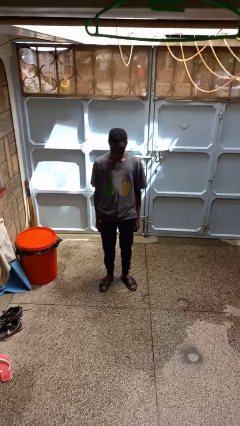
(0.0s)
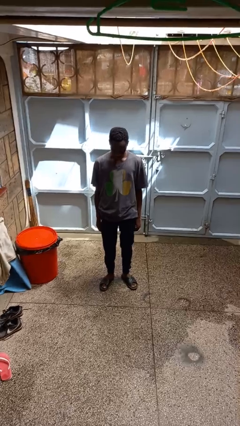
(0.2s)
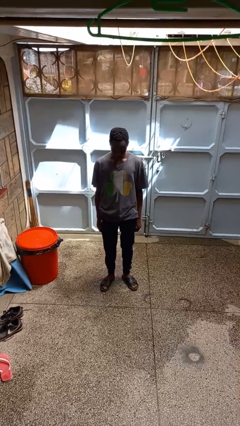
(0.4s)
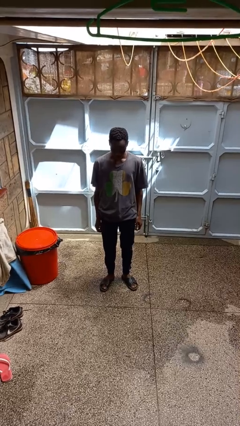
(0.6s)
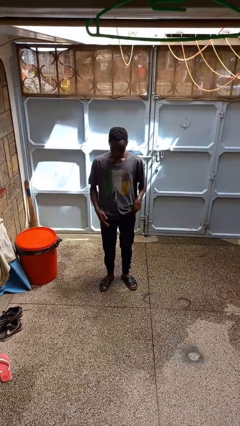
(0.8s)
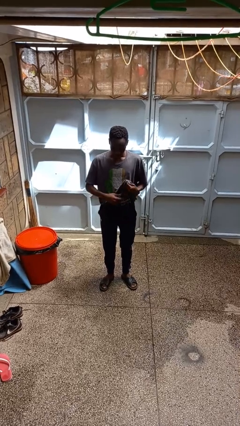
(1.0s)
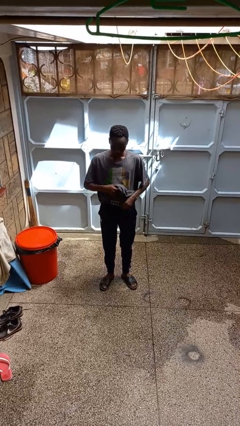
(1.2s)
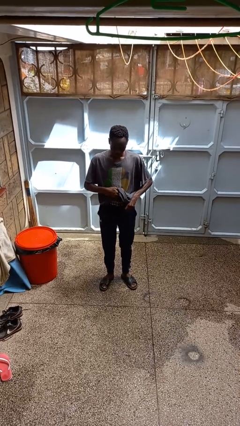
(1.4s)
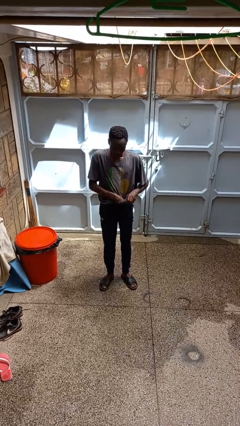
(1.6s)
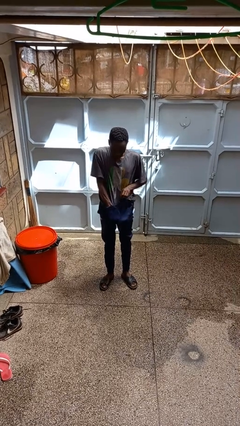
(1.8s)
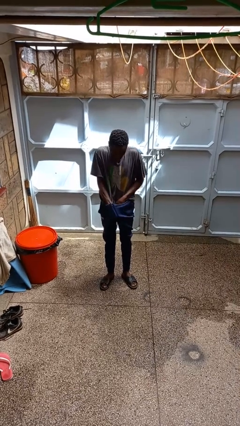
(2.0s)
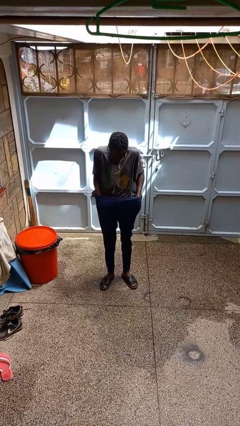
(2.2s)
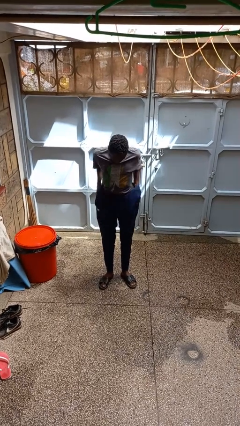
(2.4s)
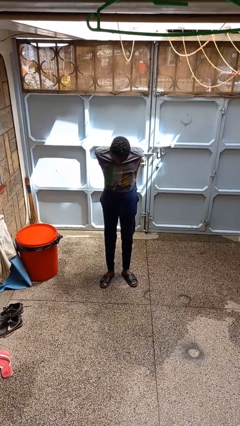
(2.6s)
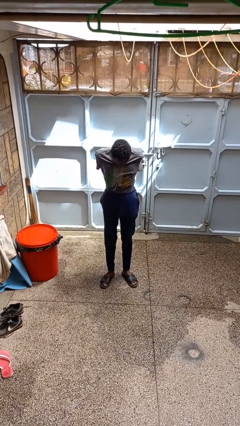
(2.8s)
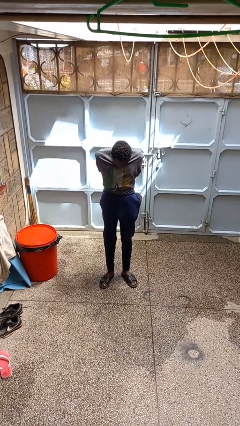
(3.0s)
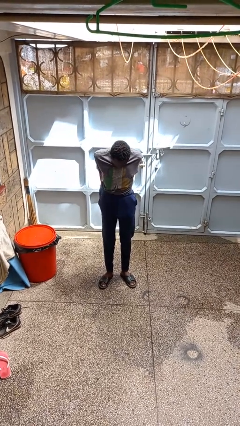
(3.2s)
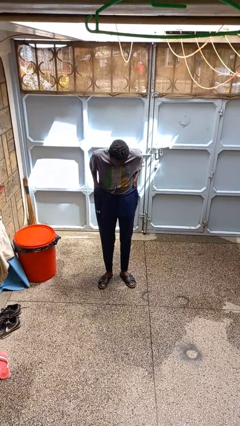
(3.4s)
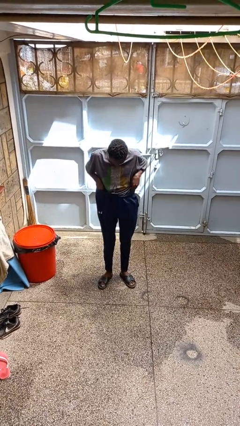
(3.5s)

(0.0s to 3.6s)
person tucks in shirt

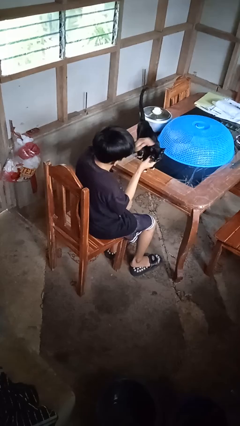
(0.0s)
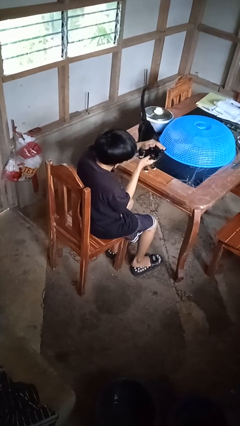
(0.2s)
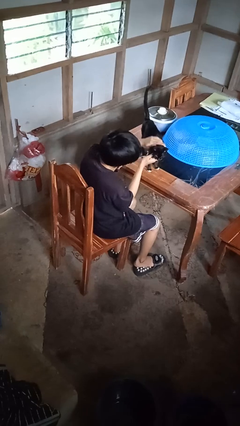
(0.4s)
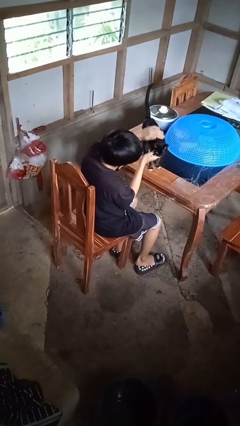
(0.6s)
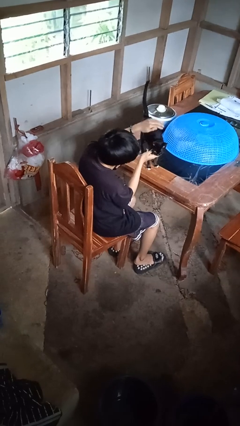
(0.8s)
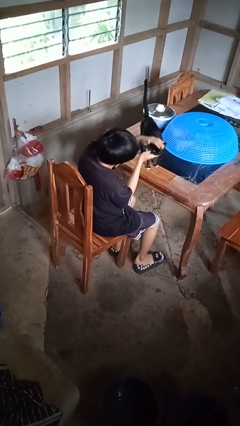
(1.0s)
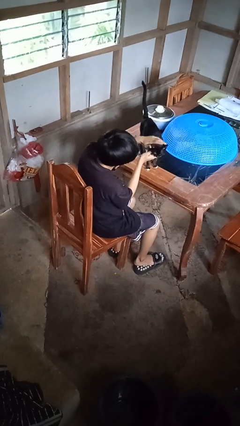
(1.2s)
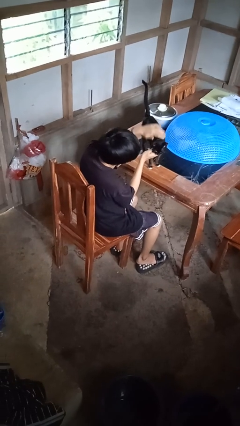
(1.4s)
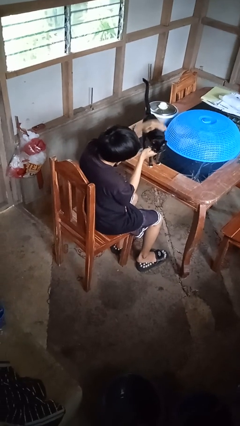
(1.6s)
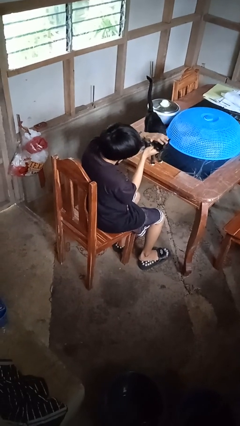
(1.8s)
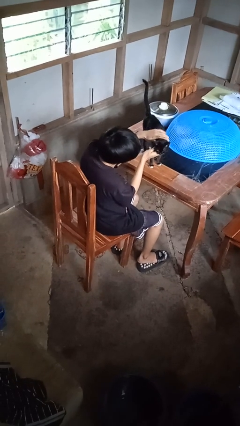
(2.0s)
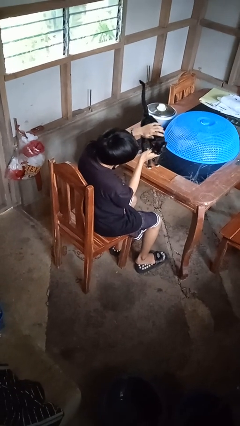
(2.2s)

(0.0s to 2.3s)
person pets cat

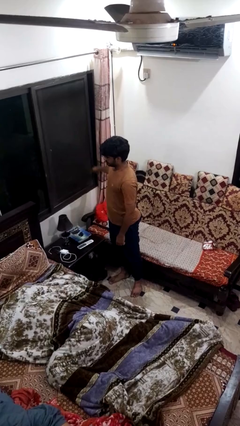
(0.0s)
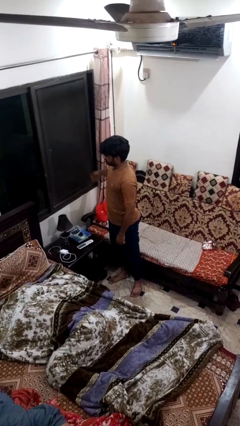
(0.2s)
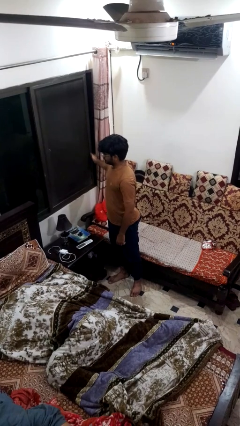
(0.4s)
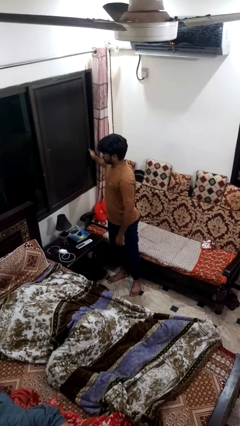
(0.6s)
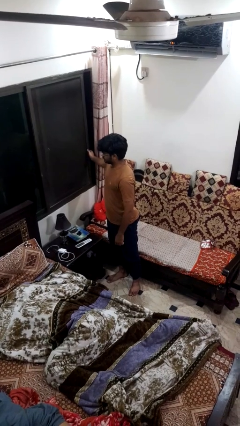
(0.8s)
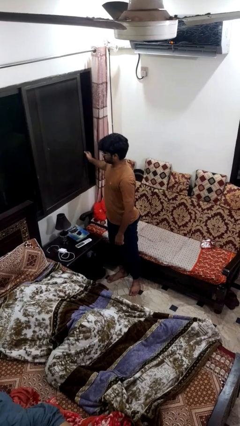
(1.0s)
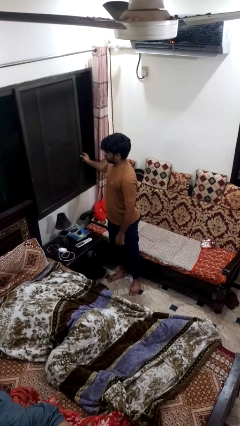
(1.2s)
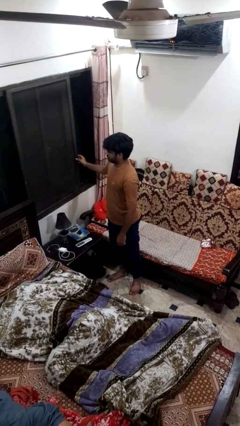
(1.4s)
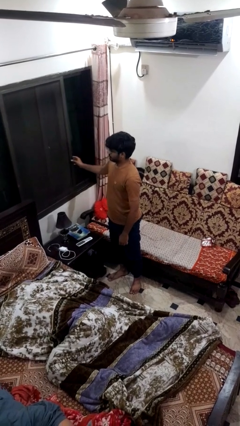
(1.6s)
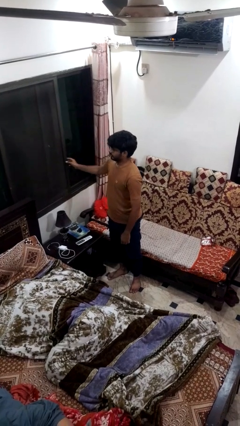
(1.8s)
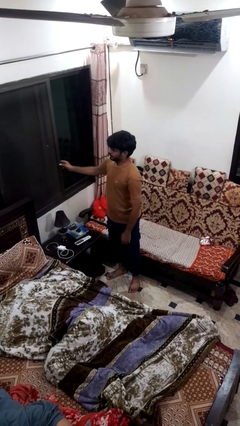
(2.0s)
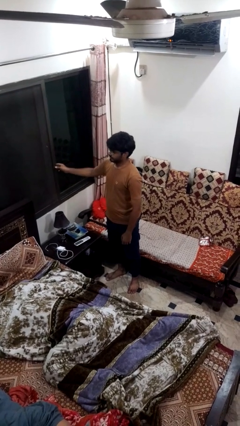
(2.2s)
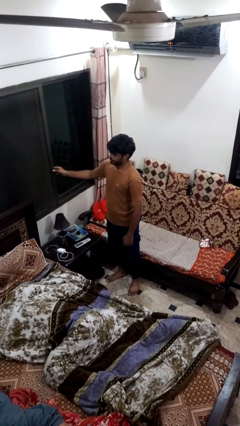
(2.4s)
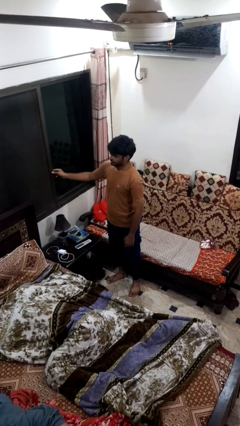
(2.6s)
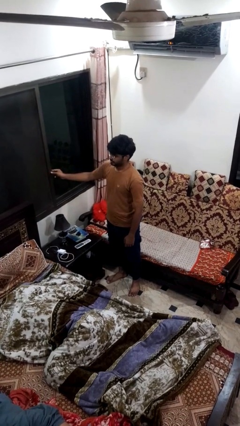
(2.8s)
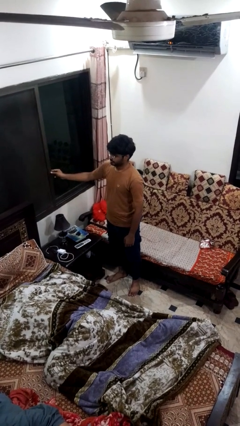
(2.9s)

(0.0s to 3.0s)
person closes home window

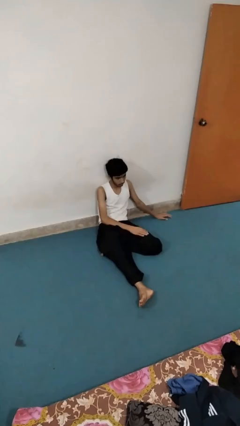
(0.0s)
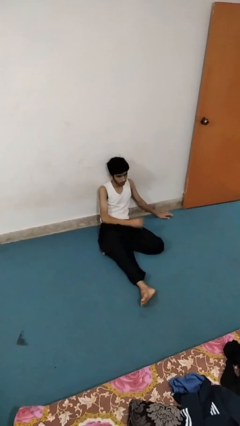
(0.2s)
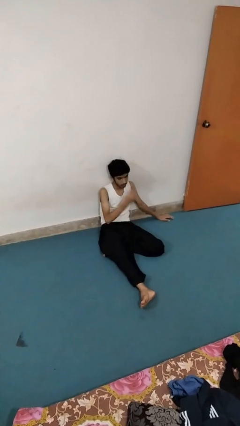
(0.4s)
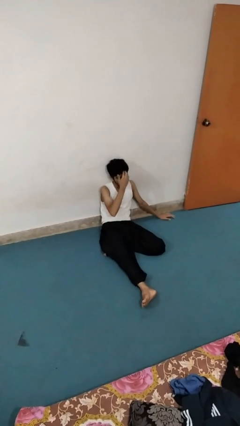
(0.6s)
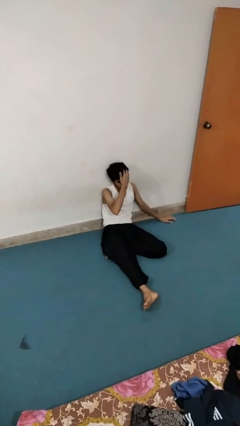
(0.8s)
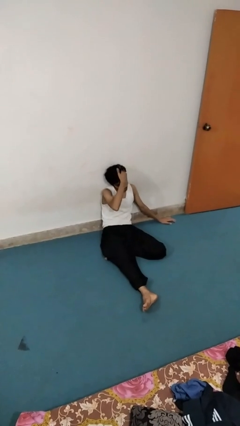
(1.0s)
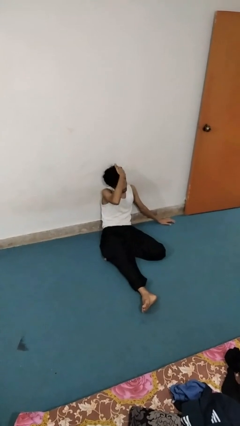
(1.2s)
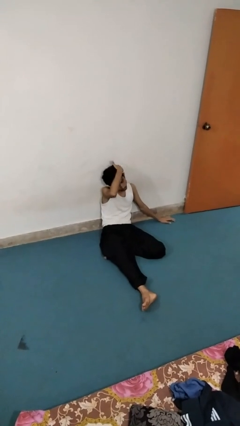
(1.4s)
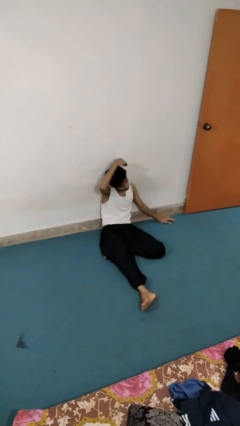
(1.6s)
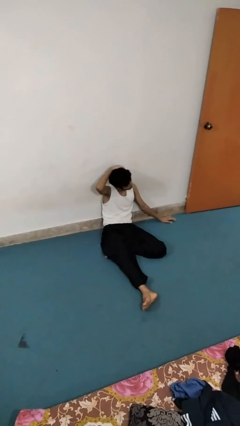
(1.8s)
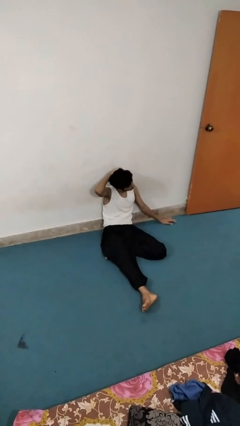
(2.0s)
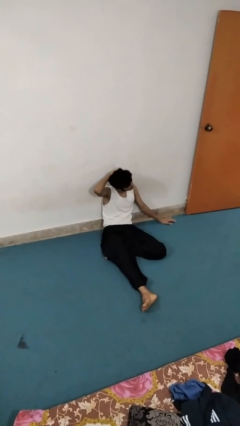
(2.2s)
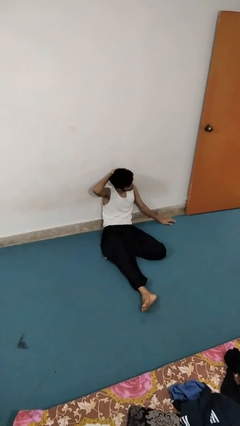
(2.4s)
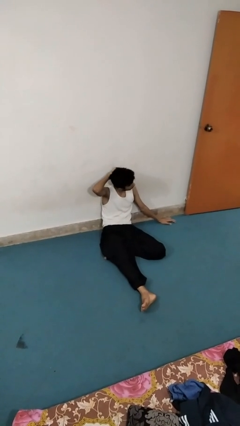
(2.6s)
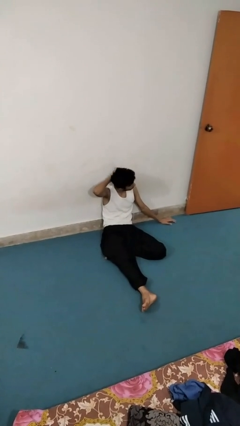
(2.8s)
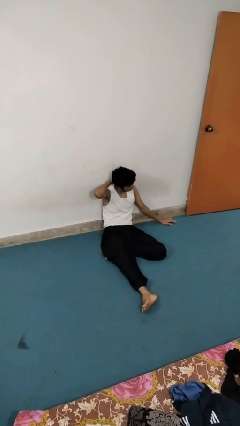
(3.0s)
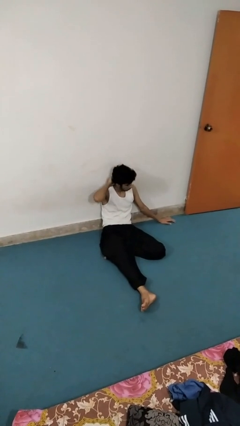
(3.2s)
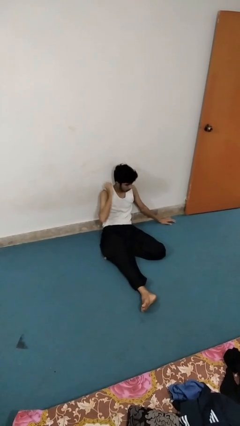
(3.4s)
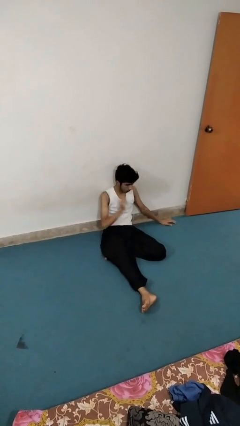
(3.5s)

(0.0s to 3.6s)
person strokes hair

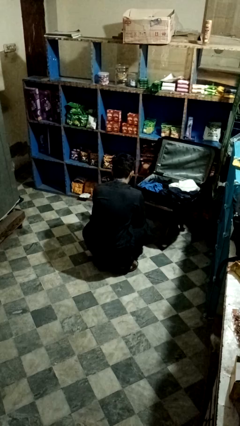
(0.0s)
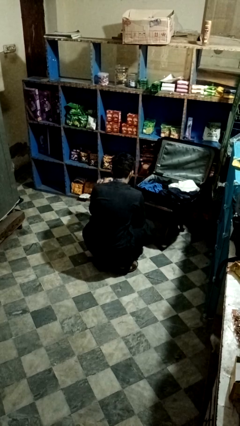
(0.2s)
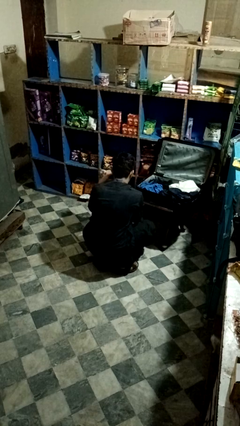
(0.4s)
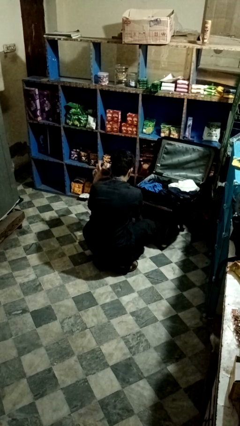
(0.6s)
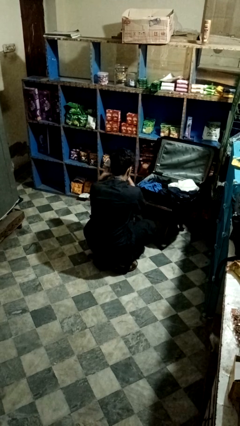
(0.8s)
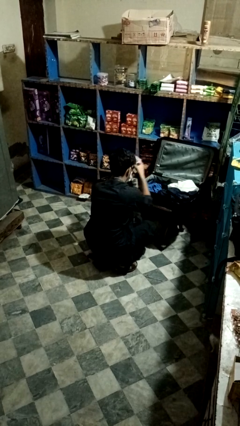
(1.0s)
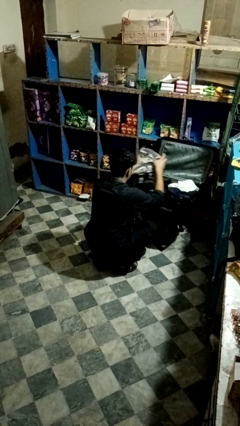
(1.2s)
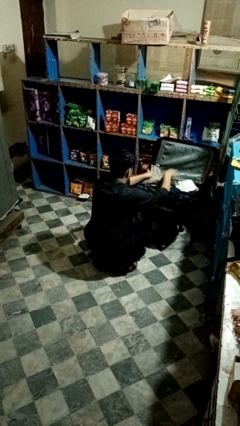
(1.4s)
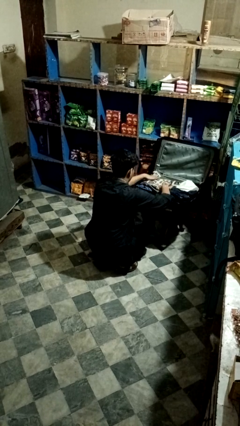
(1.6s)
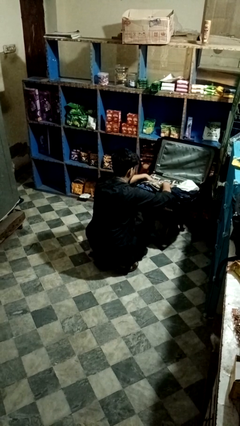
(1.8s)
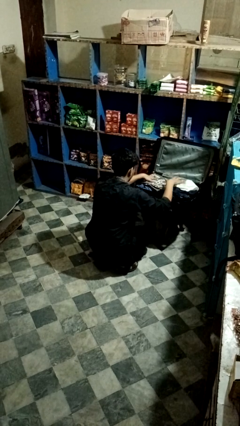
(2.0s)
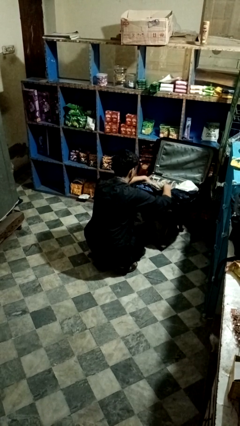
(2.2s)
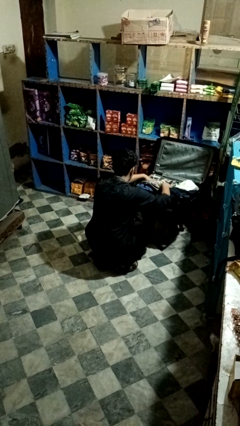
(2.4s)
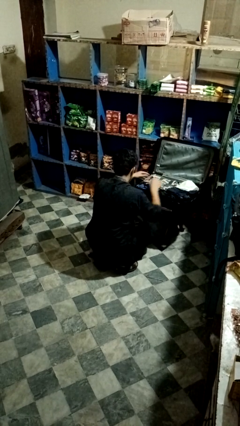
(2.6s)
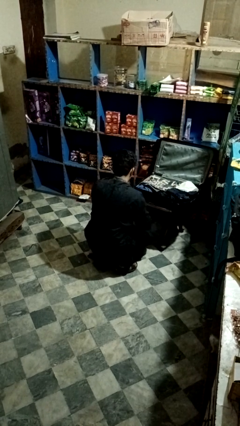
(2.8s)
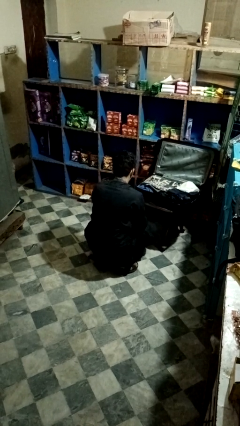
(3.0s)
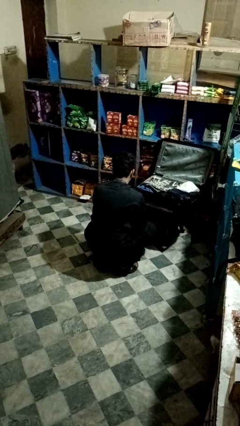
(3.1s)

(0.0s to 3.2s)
person loads clothes into suitcase

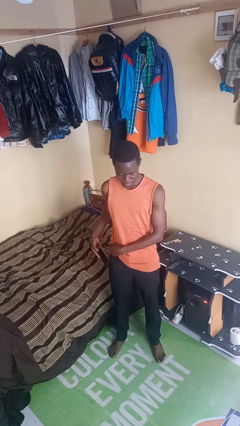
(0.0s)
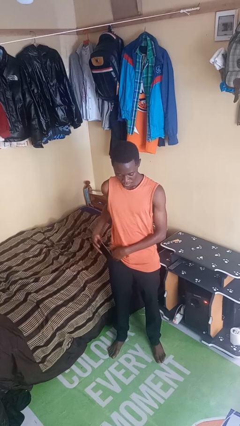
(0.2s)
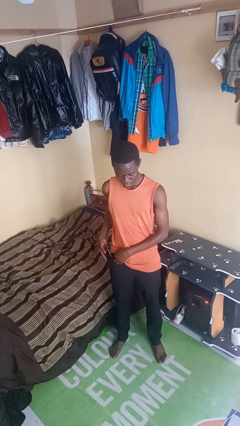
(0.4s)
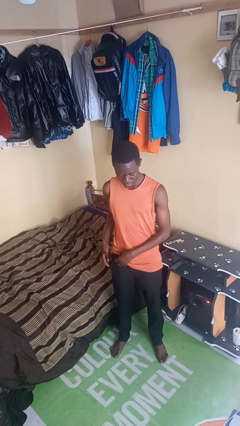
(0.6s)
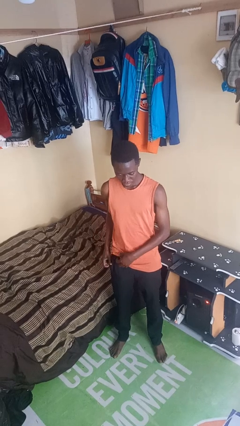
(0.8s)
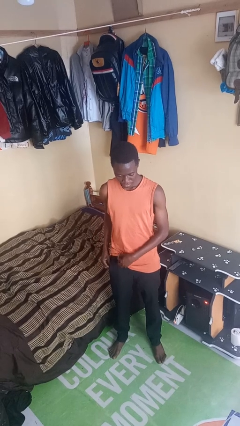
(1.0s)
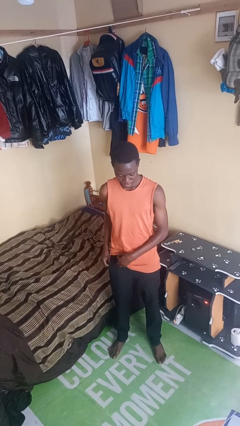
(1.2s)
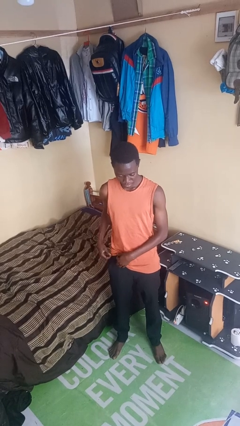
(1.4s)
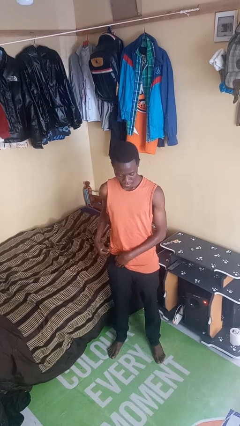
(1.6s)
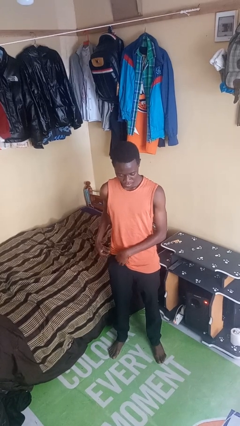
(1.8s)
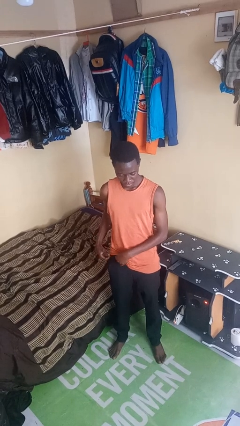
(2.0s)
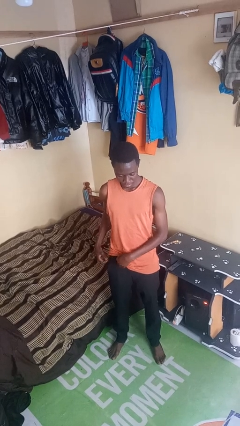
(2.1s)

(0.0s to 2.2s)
person puts phone into pocket
